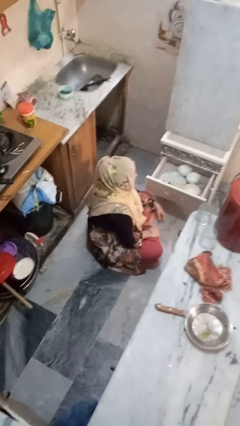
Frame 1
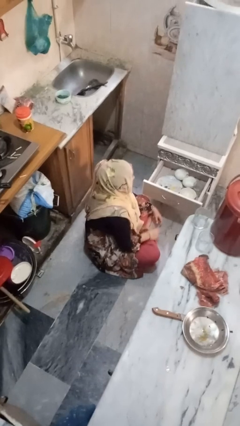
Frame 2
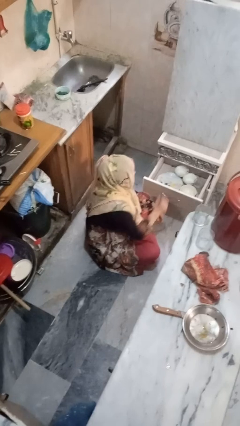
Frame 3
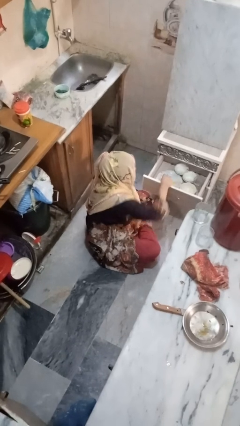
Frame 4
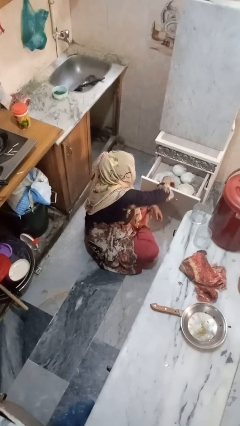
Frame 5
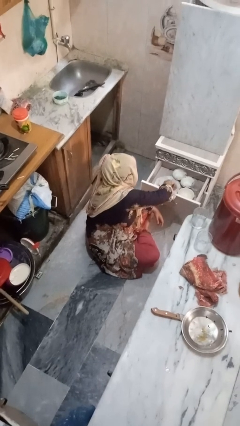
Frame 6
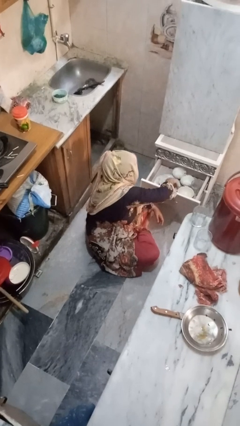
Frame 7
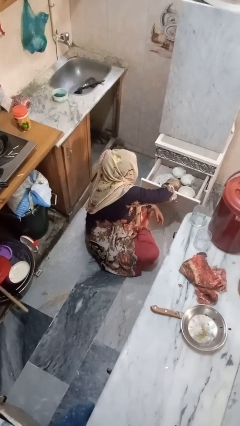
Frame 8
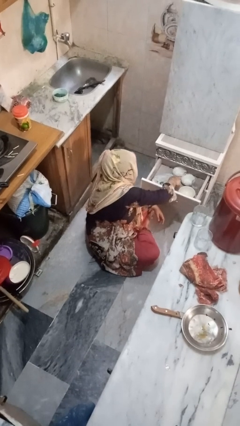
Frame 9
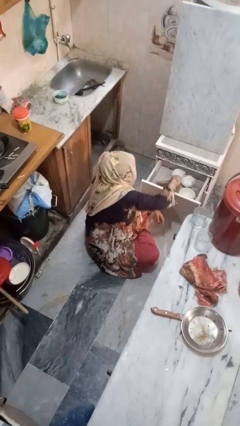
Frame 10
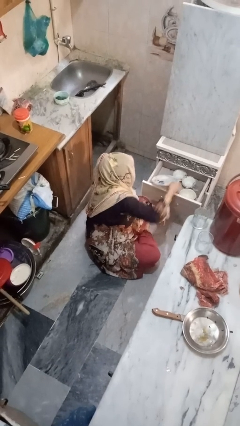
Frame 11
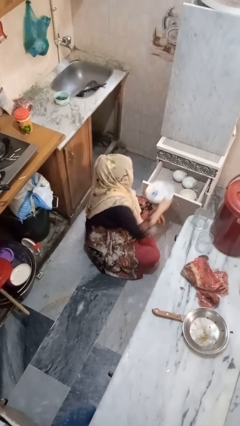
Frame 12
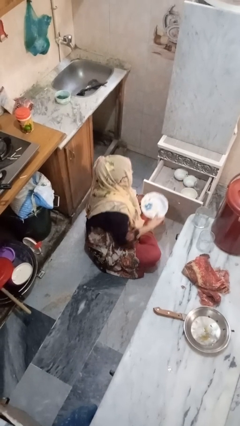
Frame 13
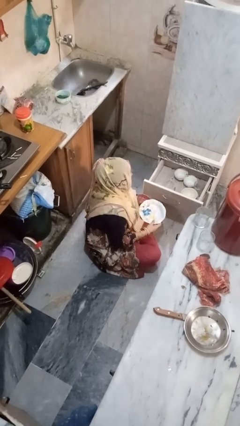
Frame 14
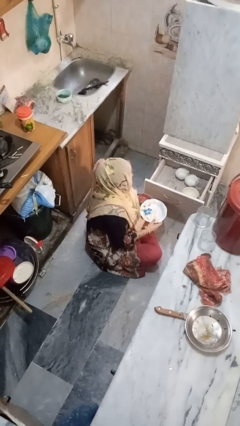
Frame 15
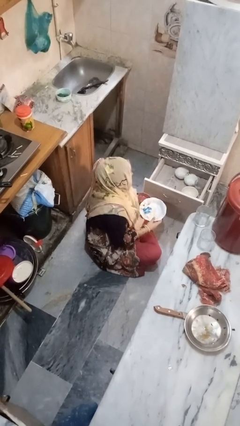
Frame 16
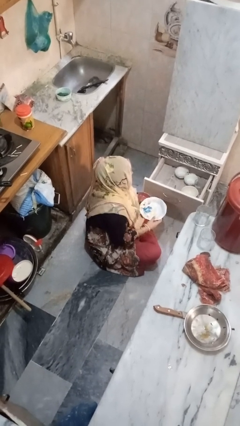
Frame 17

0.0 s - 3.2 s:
person takes object from kitchen drawer

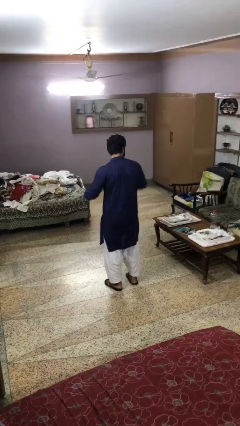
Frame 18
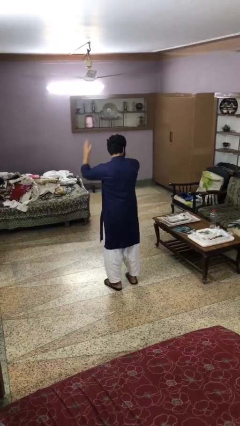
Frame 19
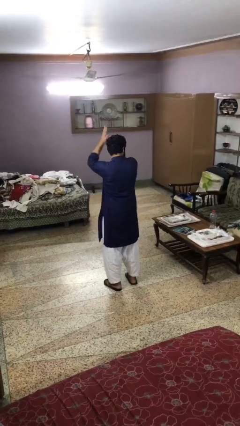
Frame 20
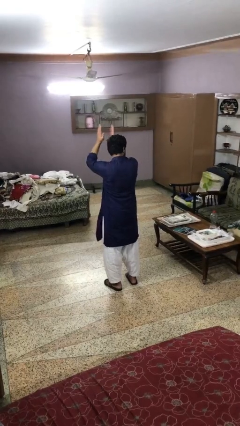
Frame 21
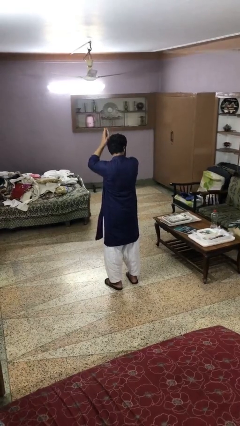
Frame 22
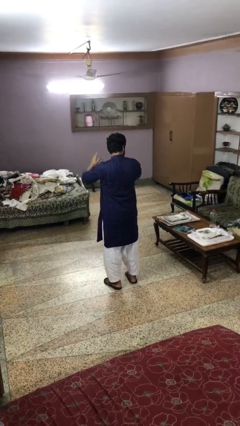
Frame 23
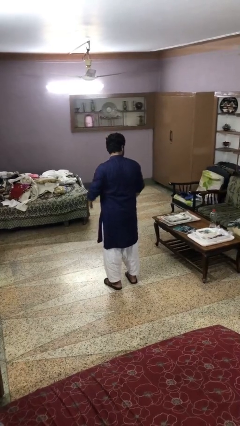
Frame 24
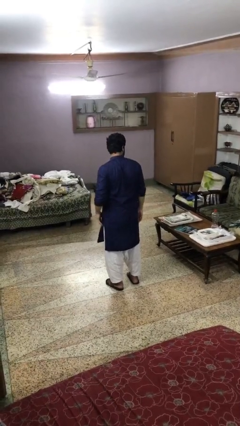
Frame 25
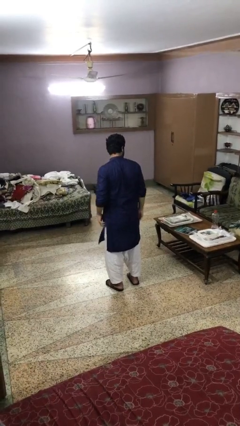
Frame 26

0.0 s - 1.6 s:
person claps hands

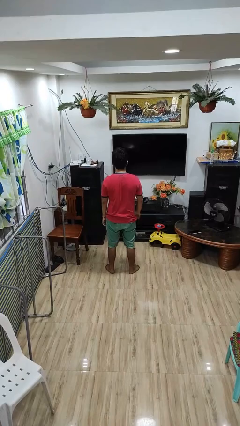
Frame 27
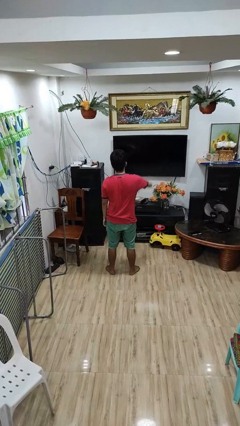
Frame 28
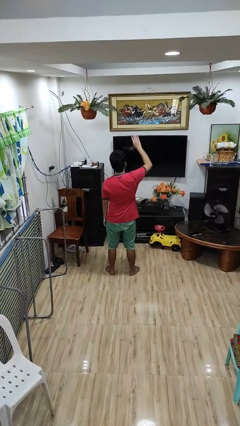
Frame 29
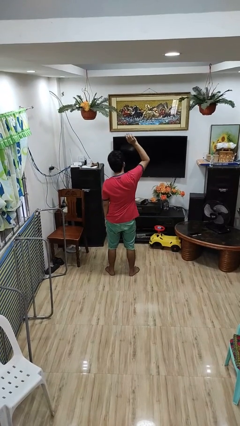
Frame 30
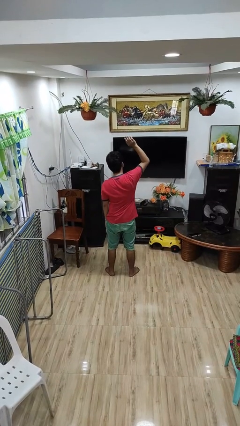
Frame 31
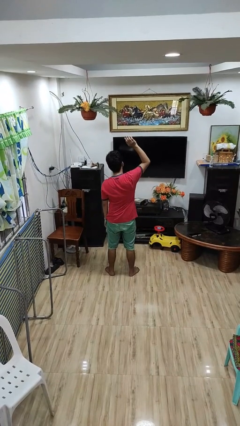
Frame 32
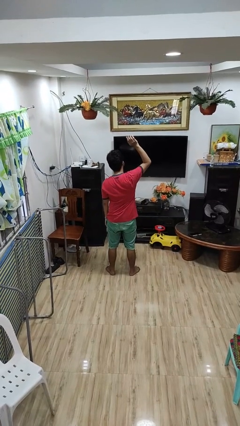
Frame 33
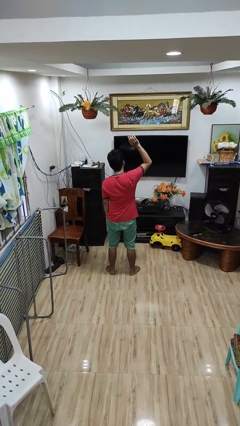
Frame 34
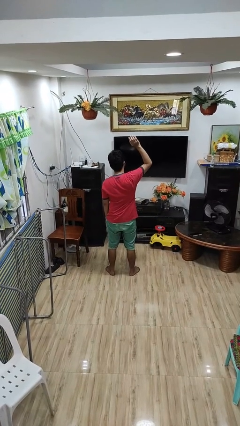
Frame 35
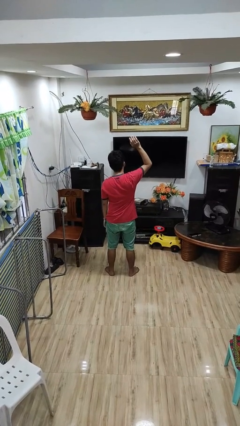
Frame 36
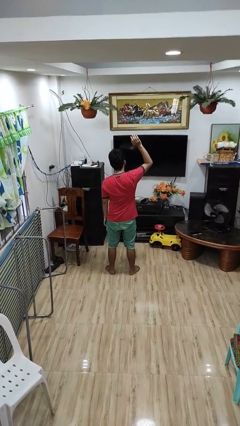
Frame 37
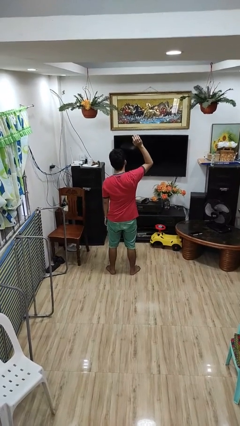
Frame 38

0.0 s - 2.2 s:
person gestures swipe up

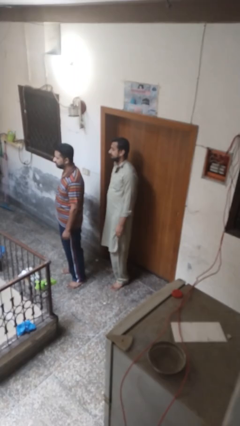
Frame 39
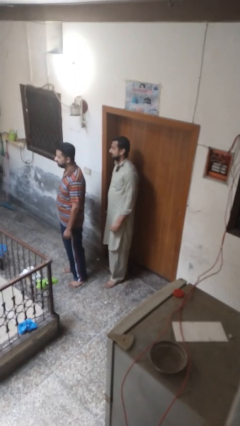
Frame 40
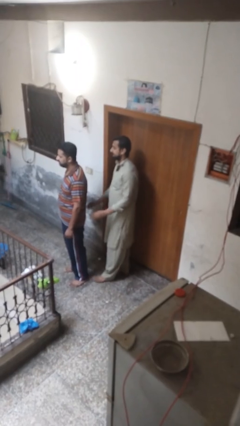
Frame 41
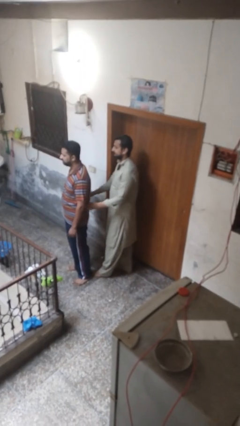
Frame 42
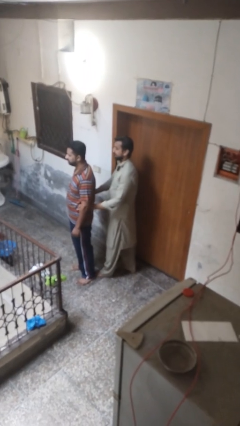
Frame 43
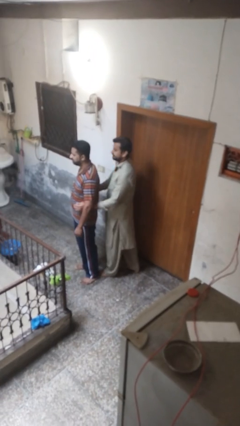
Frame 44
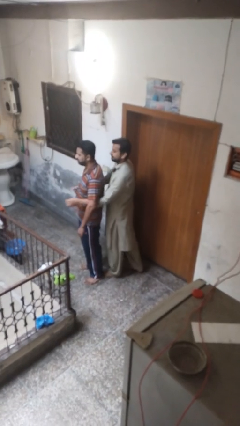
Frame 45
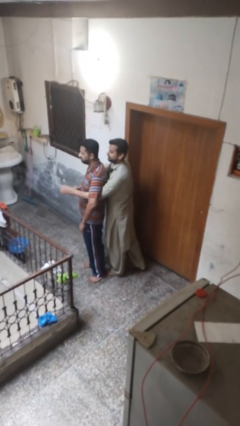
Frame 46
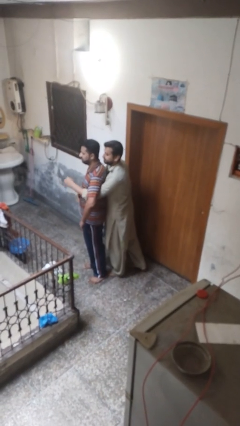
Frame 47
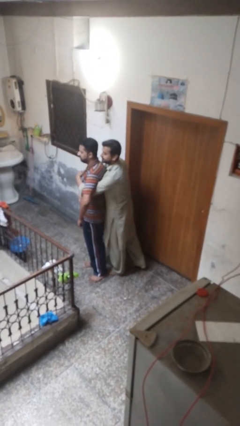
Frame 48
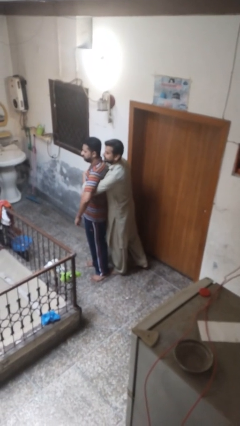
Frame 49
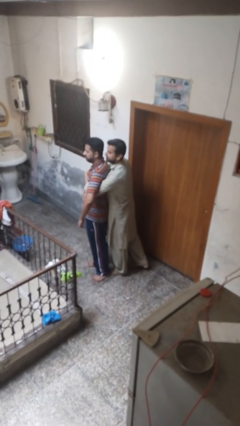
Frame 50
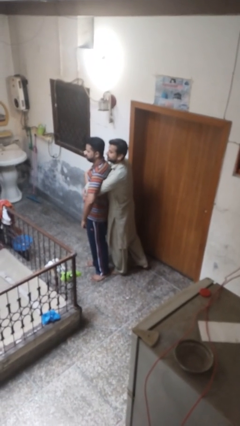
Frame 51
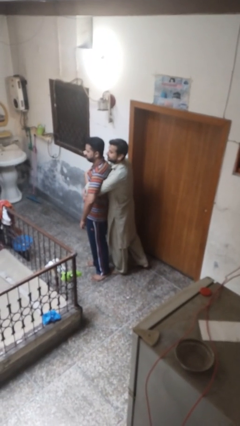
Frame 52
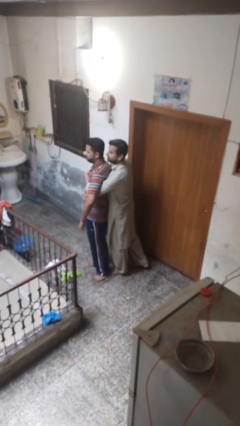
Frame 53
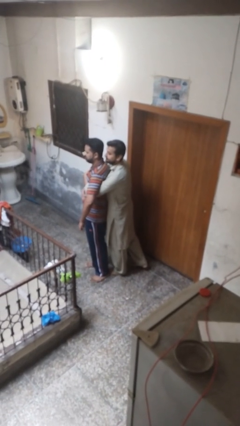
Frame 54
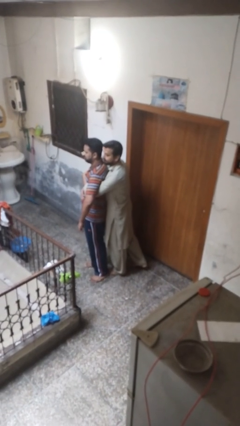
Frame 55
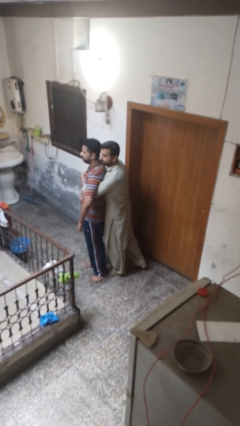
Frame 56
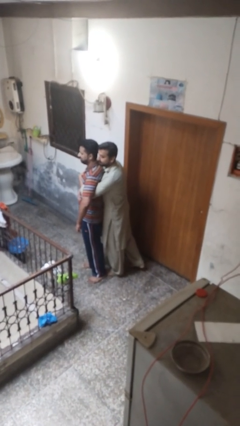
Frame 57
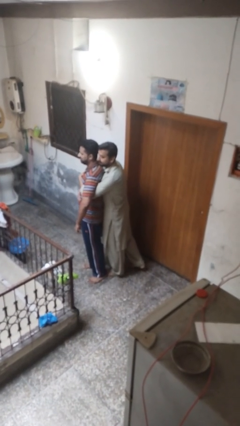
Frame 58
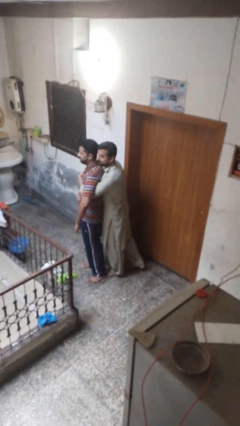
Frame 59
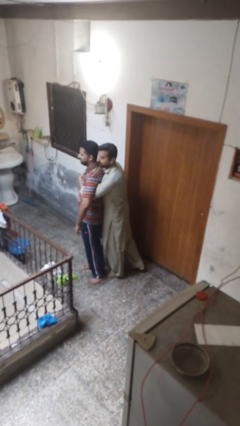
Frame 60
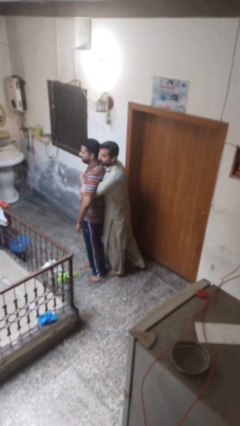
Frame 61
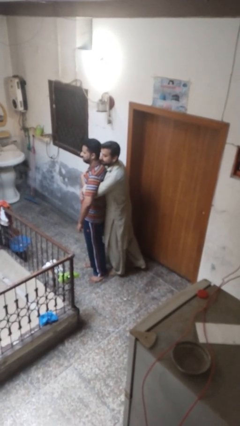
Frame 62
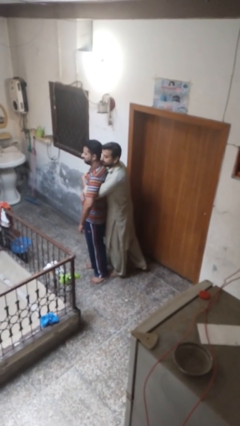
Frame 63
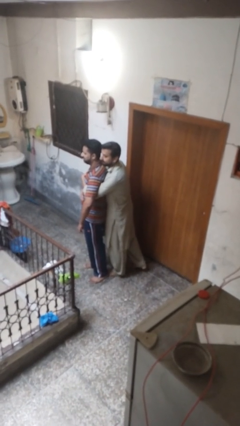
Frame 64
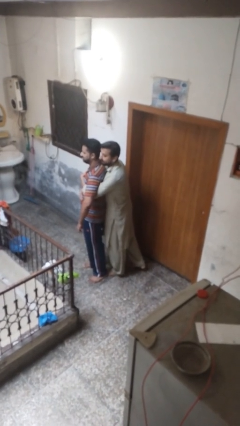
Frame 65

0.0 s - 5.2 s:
person hugs person from behind

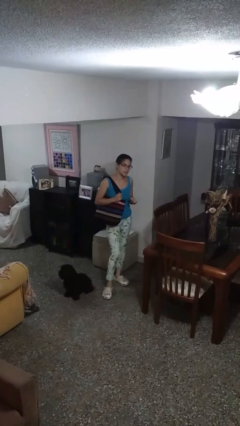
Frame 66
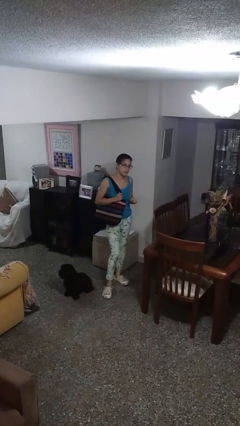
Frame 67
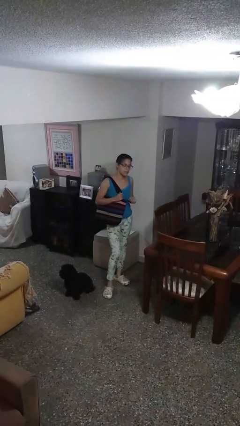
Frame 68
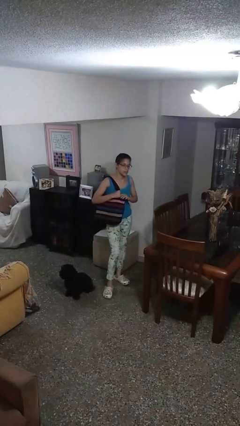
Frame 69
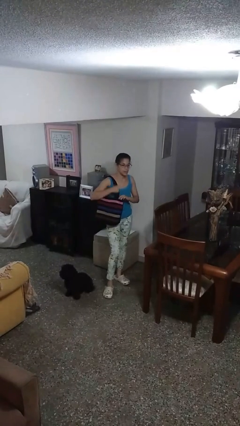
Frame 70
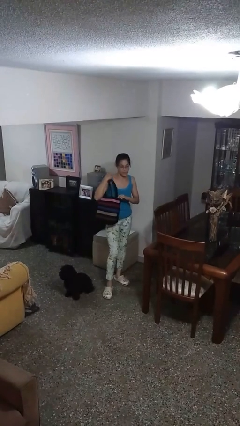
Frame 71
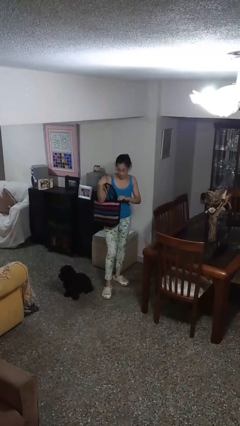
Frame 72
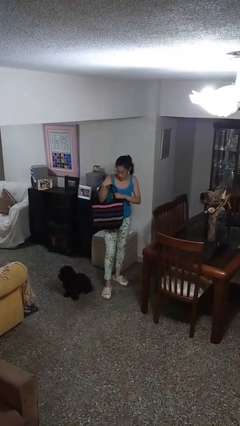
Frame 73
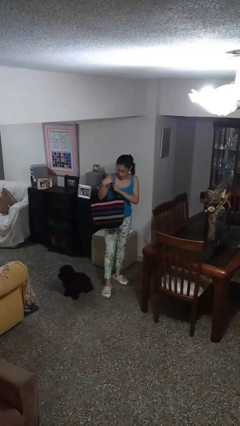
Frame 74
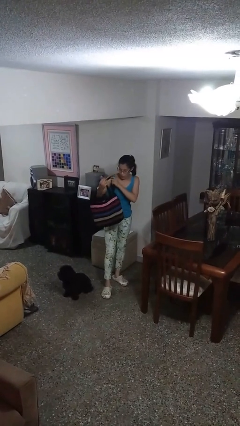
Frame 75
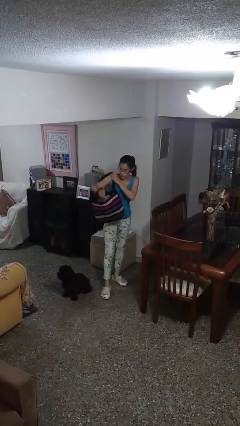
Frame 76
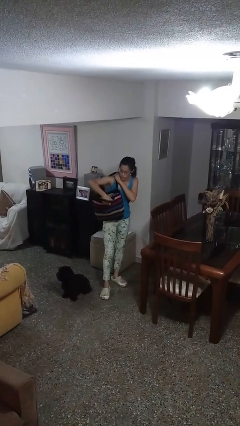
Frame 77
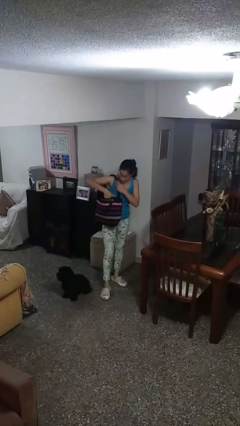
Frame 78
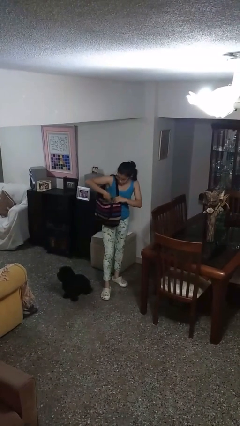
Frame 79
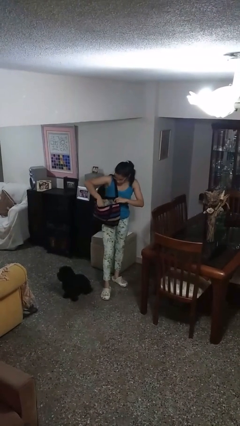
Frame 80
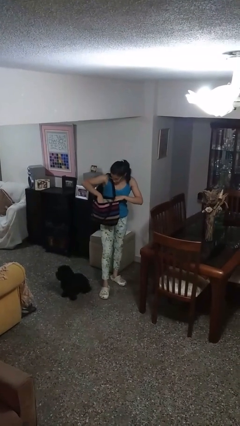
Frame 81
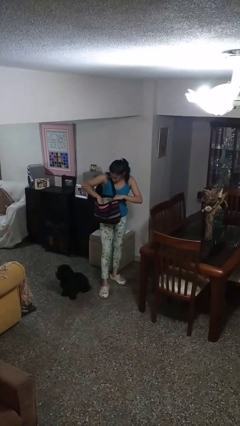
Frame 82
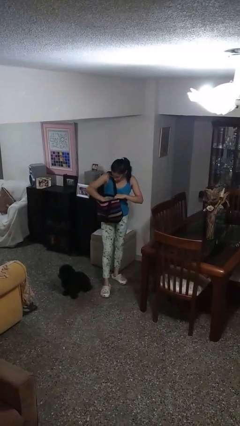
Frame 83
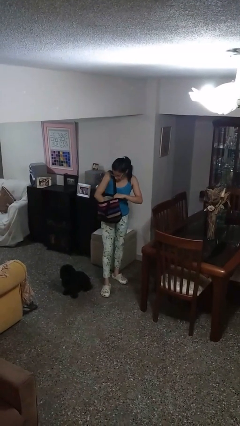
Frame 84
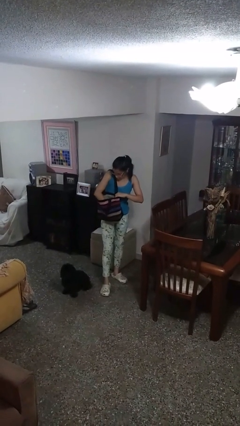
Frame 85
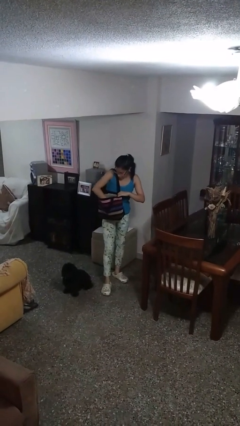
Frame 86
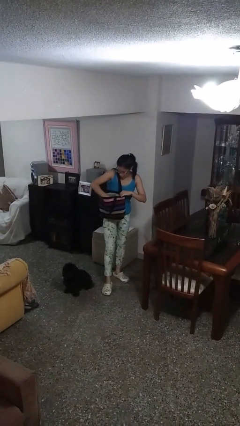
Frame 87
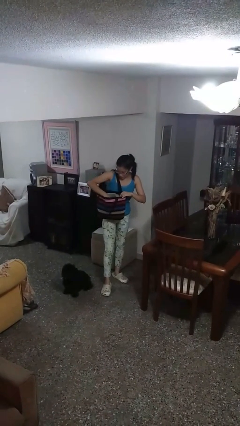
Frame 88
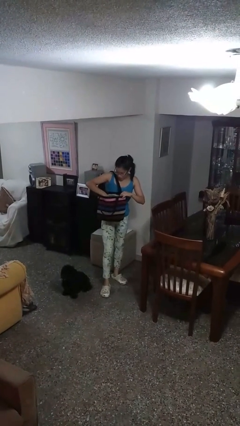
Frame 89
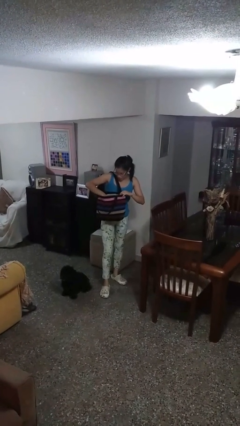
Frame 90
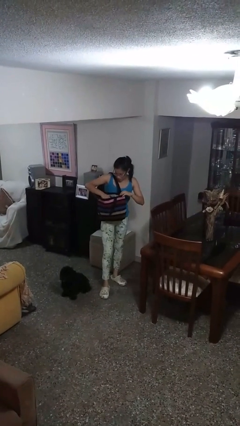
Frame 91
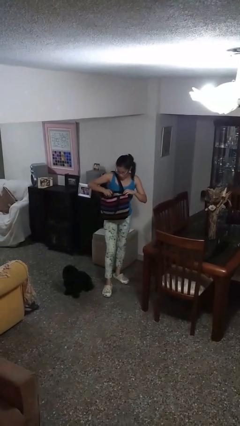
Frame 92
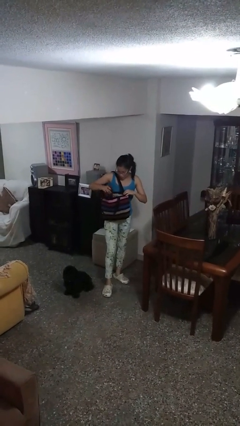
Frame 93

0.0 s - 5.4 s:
person searches in purse
